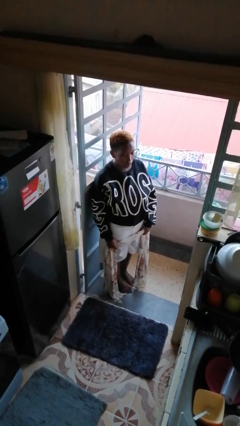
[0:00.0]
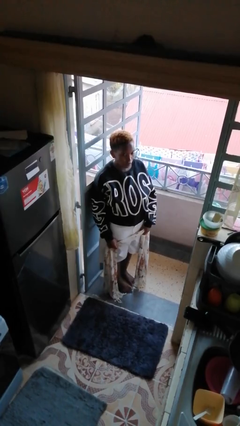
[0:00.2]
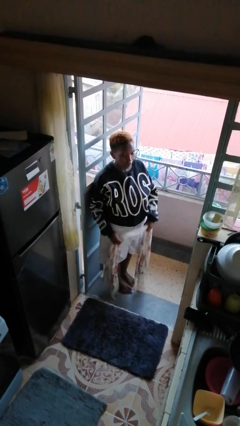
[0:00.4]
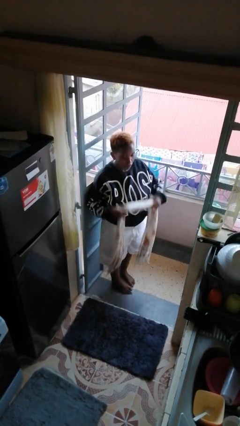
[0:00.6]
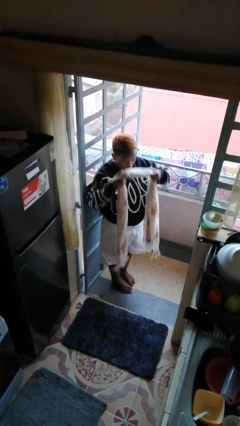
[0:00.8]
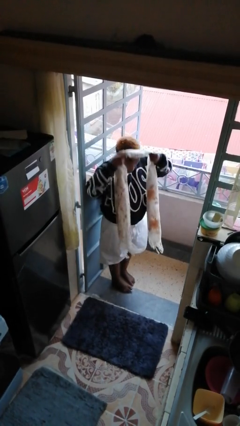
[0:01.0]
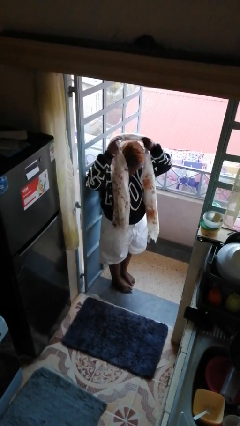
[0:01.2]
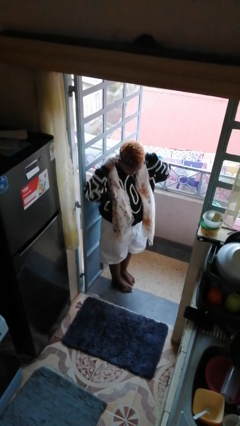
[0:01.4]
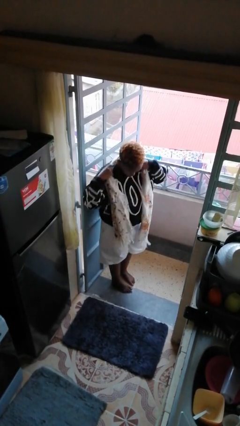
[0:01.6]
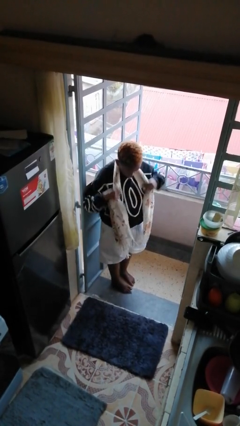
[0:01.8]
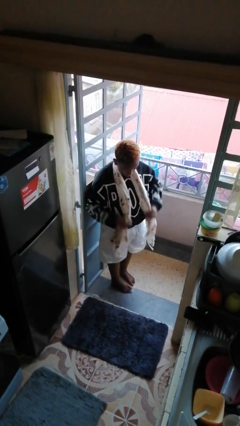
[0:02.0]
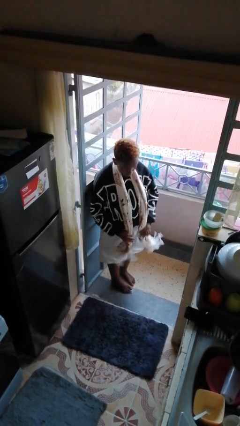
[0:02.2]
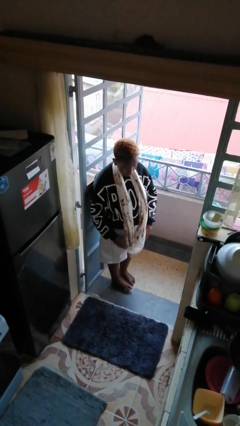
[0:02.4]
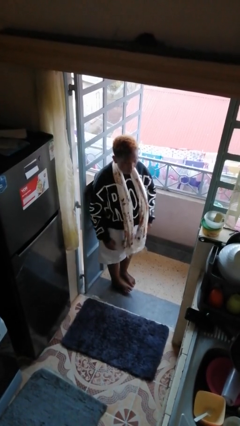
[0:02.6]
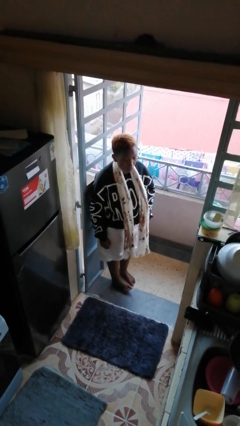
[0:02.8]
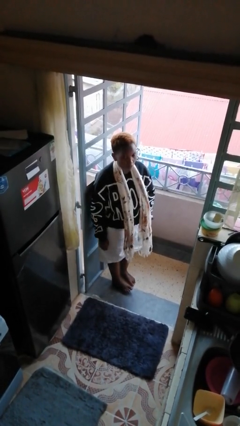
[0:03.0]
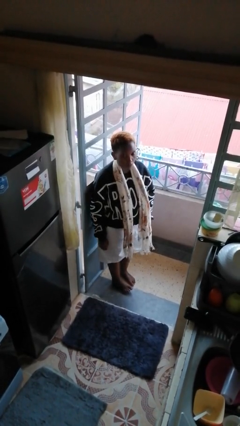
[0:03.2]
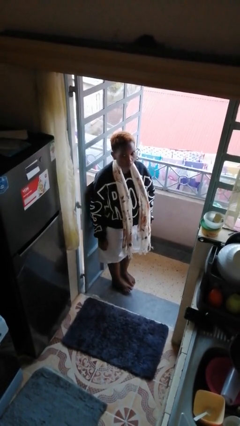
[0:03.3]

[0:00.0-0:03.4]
person puts on scarf

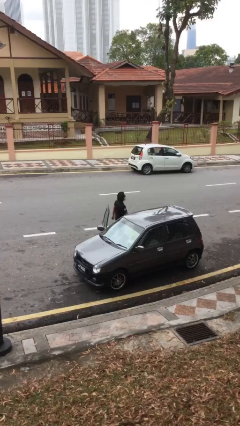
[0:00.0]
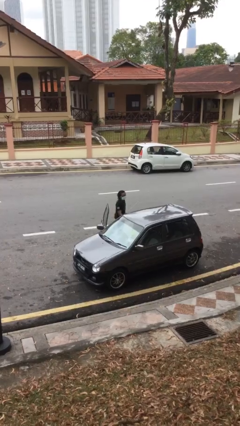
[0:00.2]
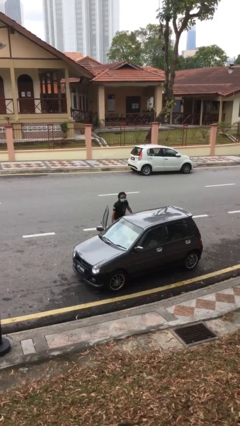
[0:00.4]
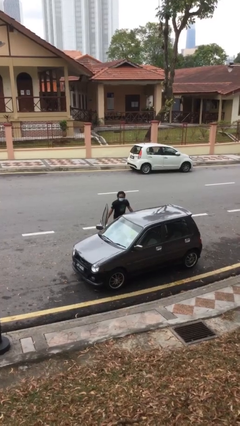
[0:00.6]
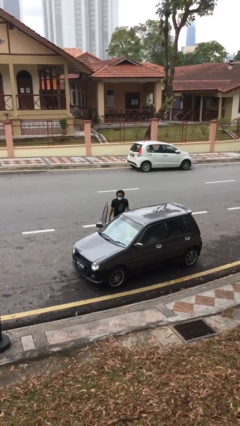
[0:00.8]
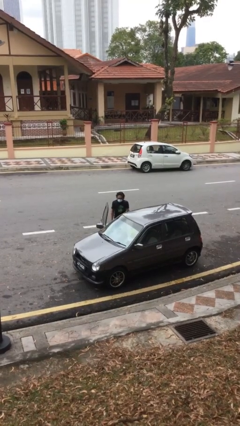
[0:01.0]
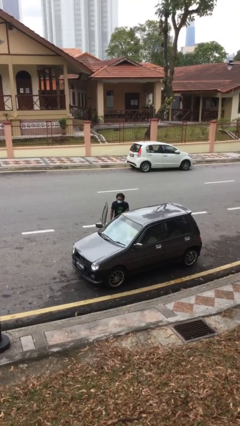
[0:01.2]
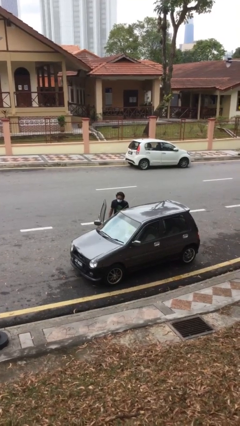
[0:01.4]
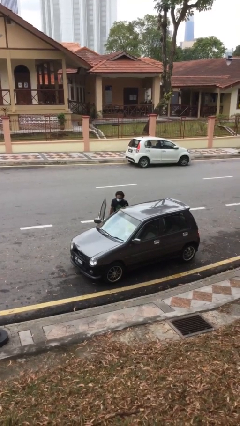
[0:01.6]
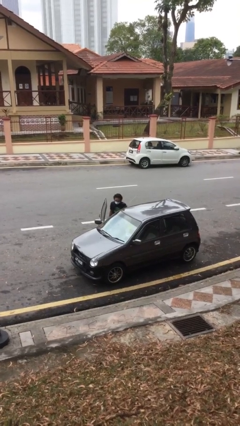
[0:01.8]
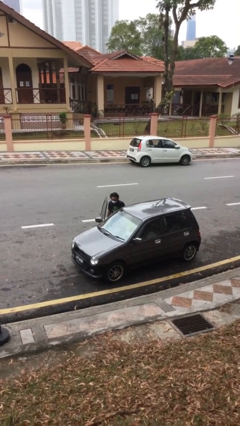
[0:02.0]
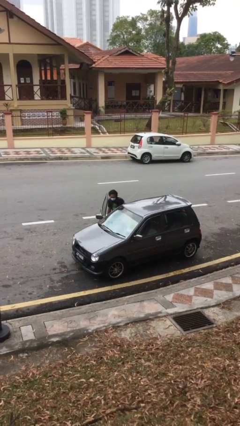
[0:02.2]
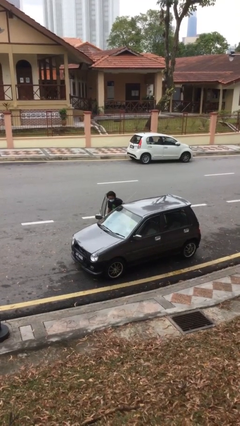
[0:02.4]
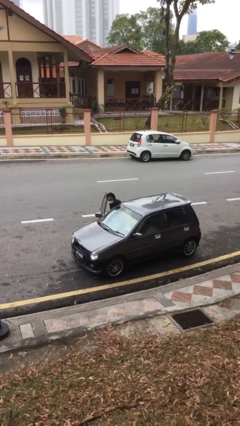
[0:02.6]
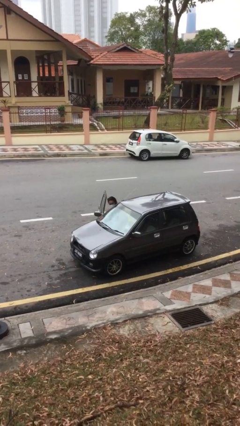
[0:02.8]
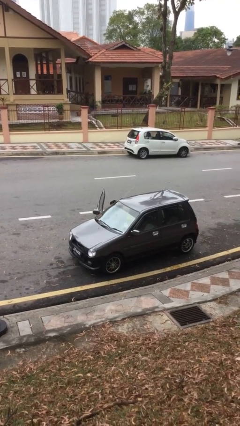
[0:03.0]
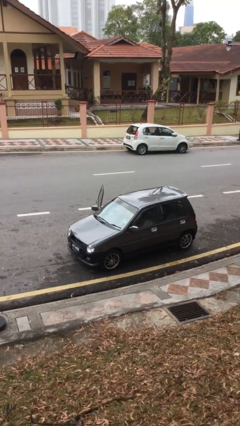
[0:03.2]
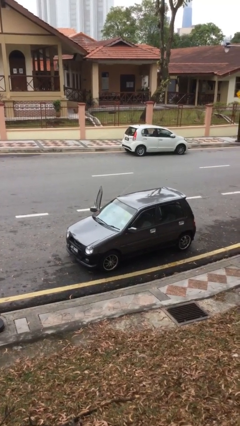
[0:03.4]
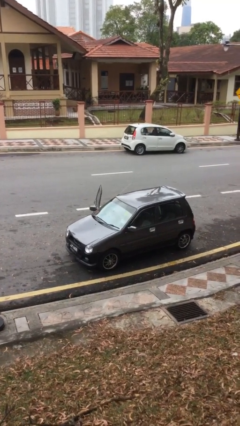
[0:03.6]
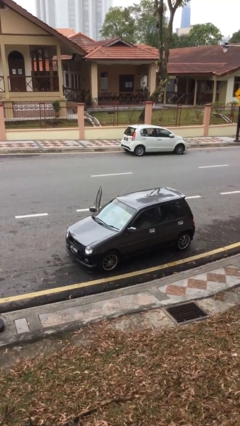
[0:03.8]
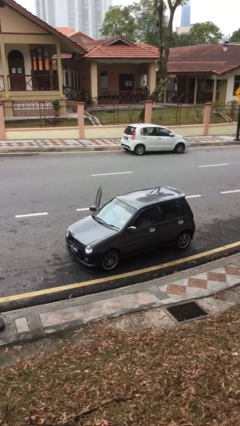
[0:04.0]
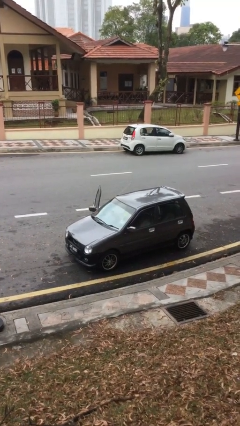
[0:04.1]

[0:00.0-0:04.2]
person enters car

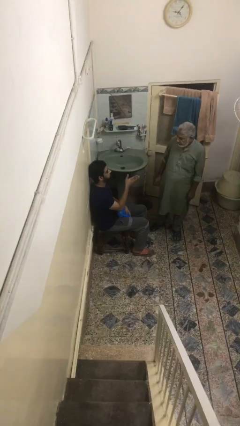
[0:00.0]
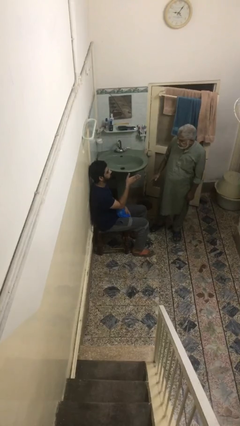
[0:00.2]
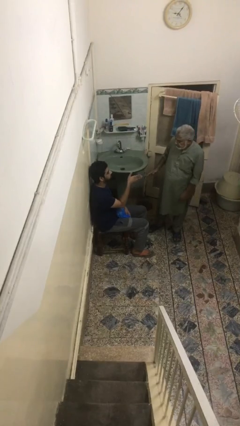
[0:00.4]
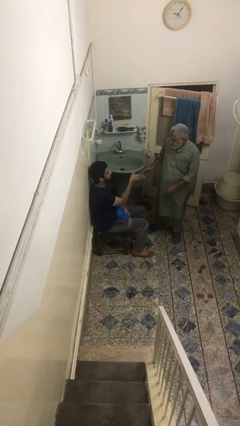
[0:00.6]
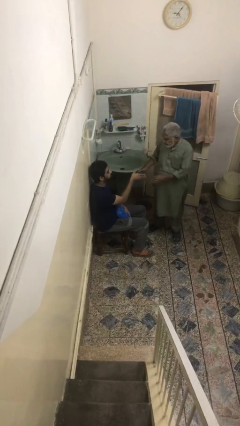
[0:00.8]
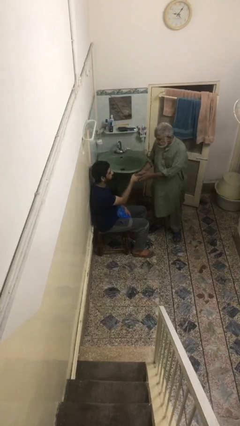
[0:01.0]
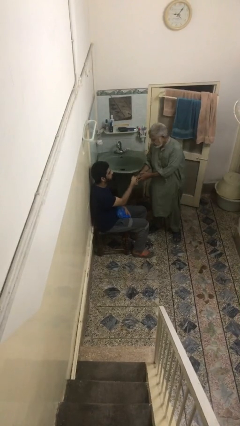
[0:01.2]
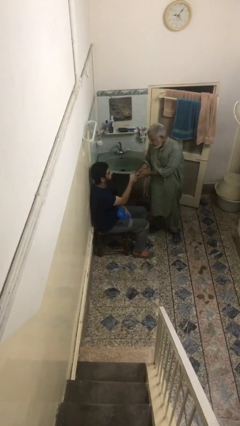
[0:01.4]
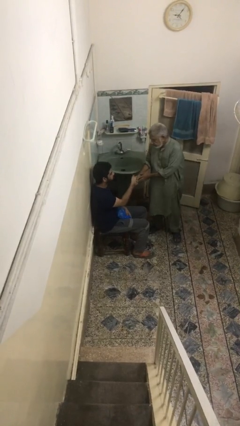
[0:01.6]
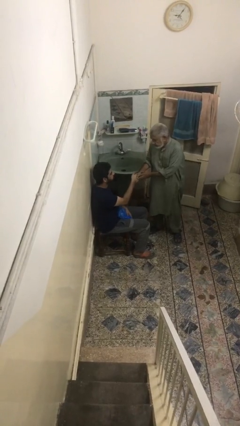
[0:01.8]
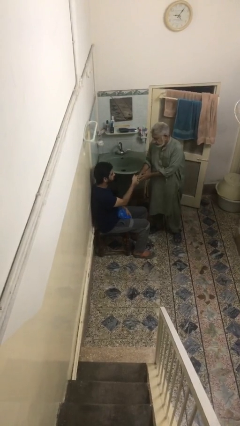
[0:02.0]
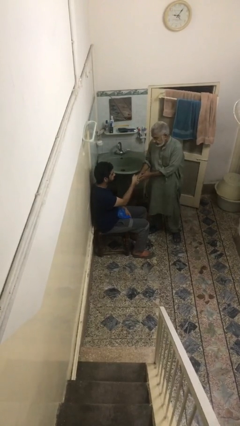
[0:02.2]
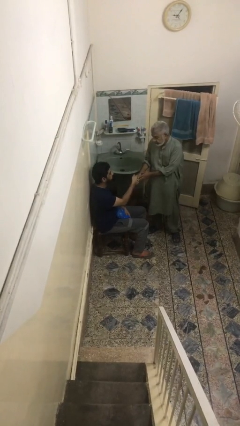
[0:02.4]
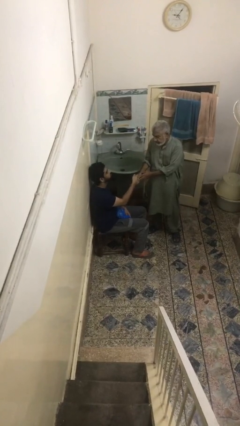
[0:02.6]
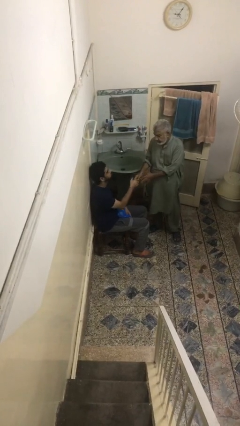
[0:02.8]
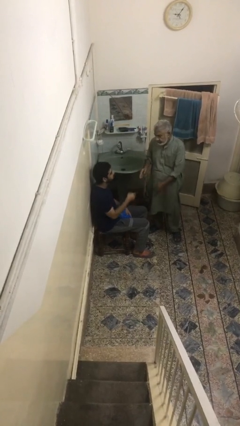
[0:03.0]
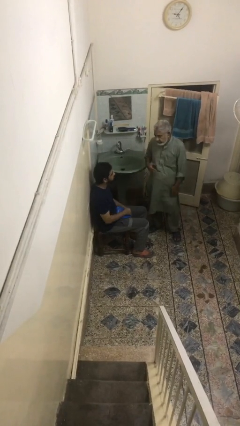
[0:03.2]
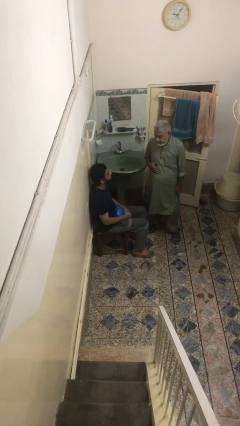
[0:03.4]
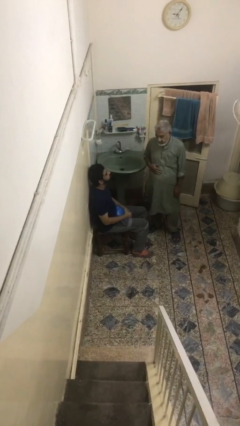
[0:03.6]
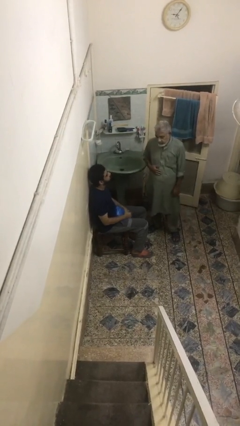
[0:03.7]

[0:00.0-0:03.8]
person shakes hand

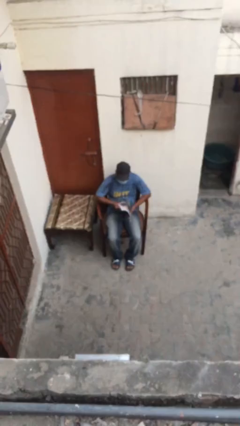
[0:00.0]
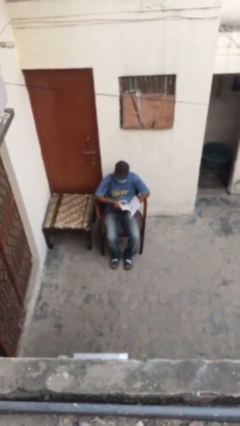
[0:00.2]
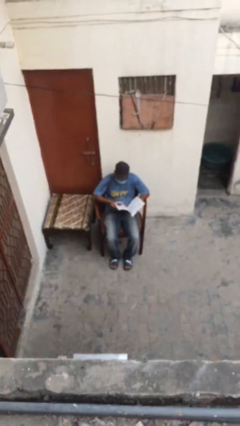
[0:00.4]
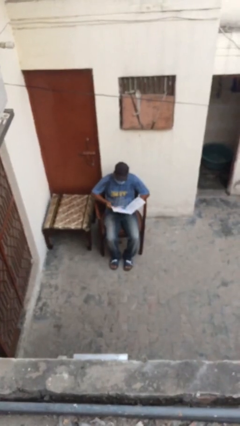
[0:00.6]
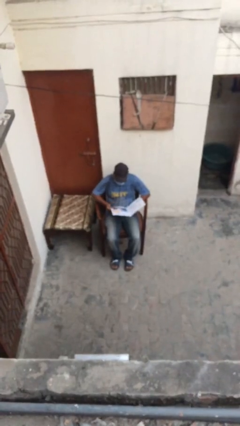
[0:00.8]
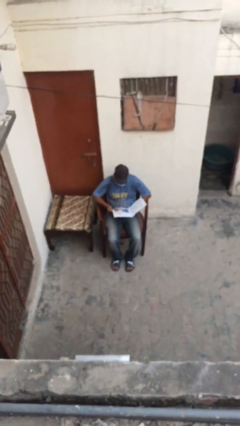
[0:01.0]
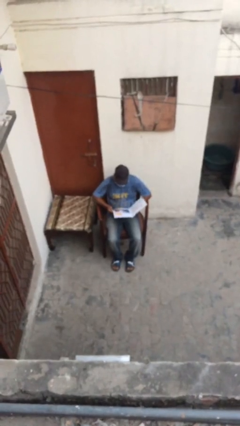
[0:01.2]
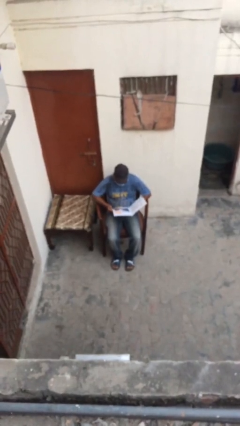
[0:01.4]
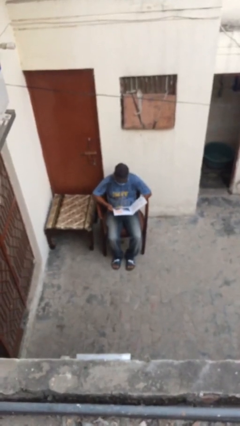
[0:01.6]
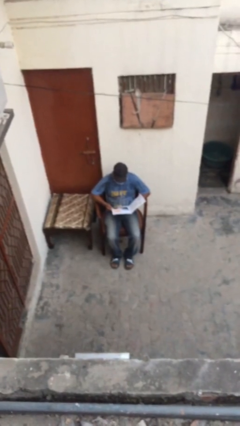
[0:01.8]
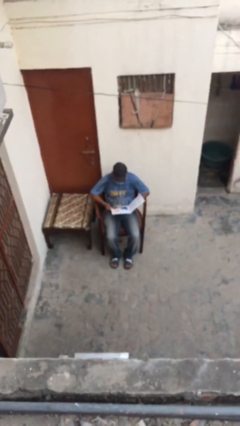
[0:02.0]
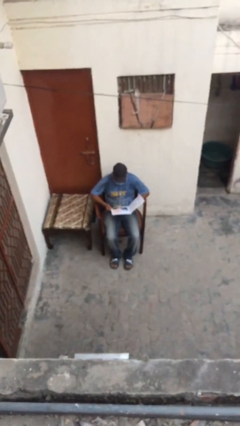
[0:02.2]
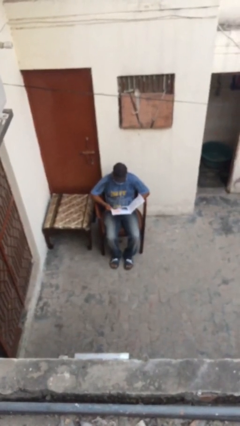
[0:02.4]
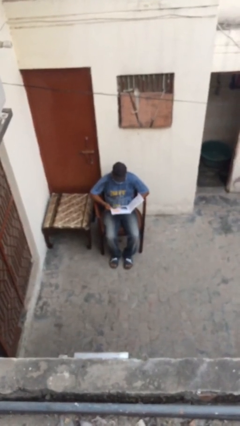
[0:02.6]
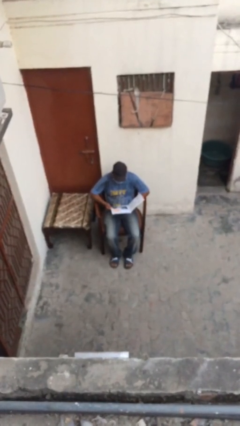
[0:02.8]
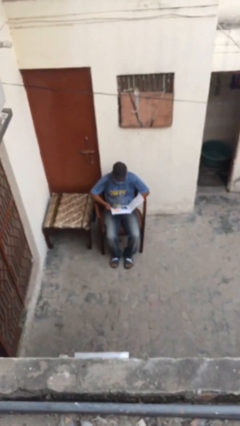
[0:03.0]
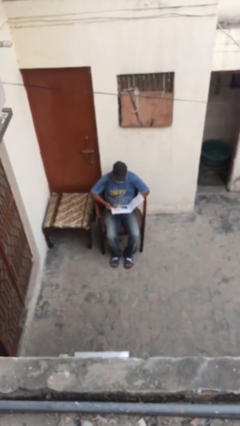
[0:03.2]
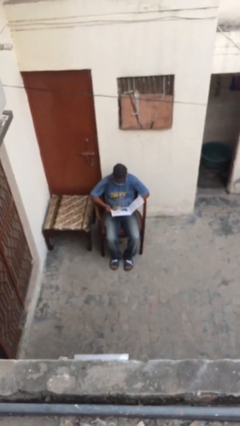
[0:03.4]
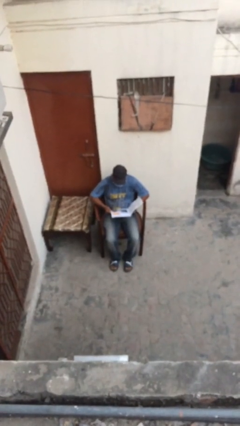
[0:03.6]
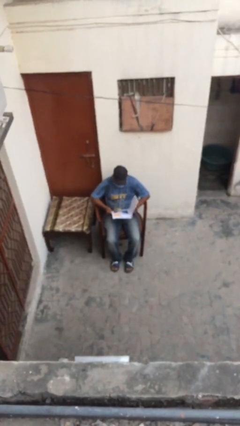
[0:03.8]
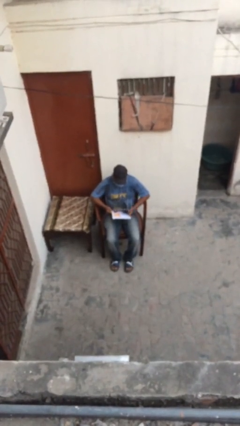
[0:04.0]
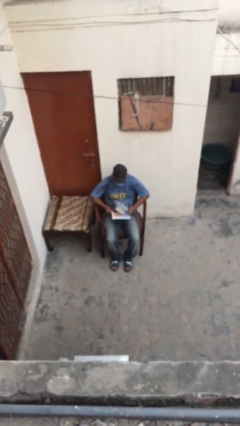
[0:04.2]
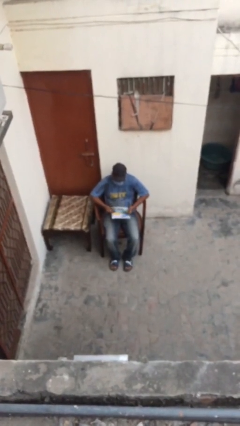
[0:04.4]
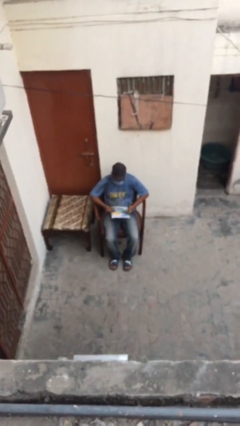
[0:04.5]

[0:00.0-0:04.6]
person reads document

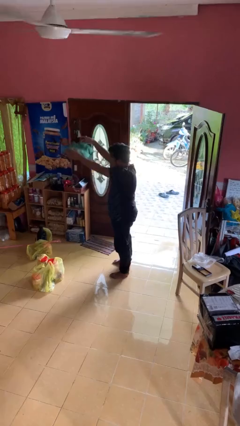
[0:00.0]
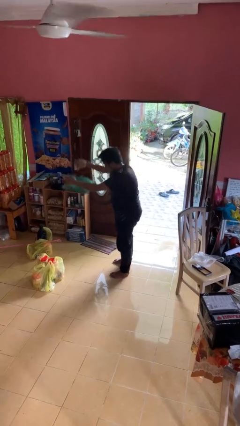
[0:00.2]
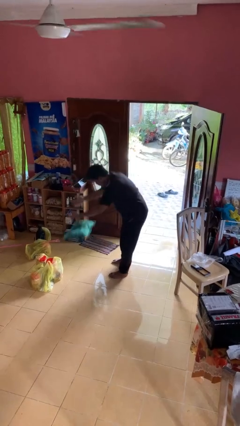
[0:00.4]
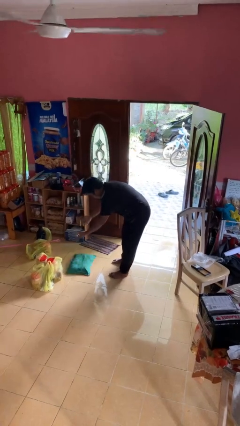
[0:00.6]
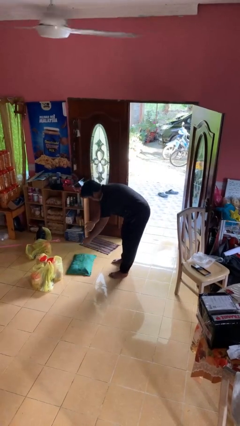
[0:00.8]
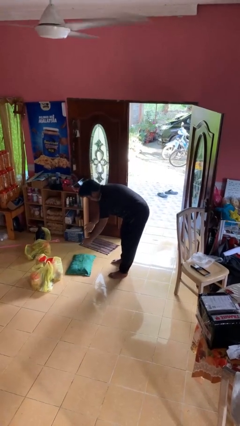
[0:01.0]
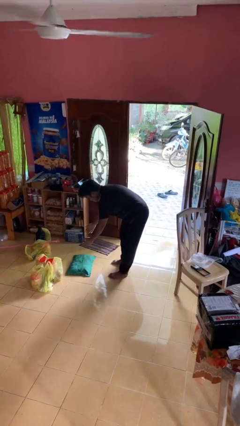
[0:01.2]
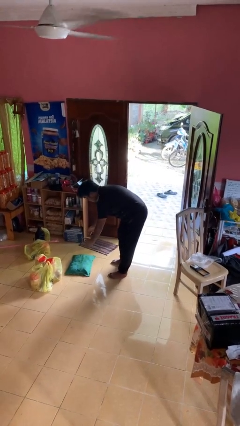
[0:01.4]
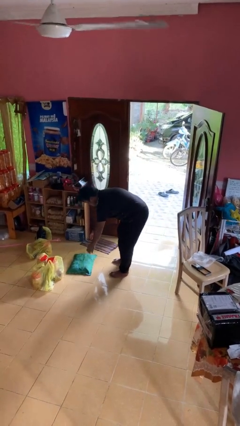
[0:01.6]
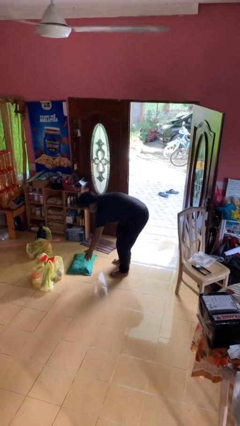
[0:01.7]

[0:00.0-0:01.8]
person drops object
